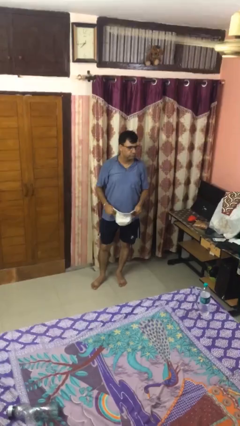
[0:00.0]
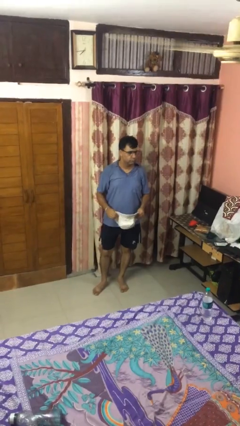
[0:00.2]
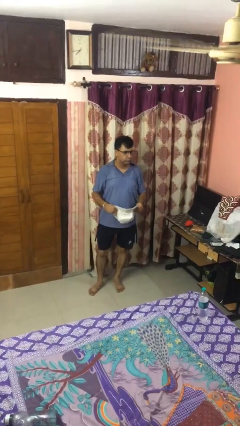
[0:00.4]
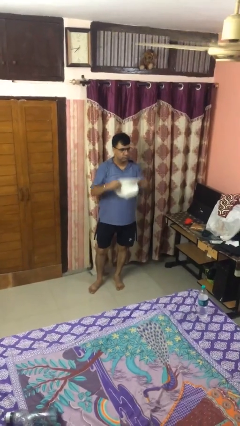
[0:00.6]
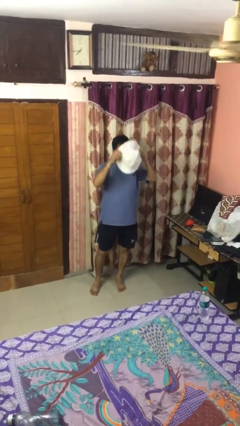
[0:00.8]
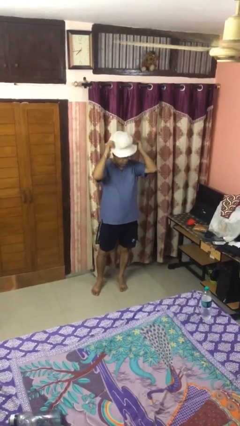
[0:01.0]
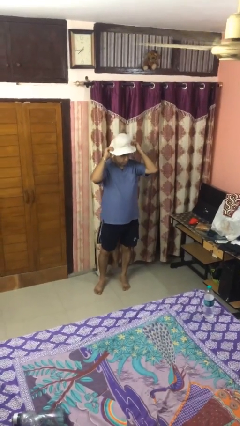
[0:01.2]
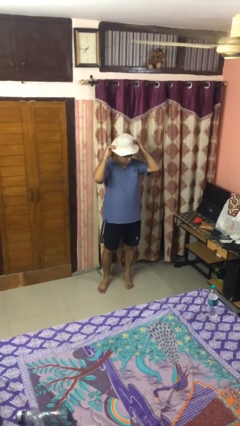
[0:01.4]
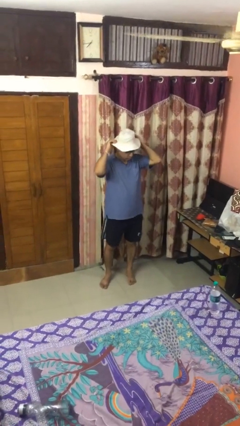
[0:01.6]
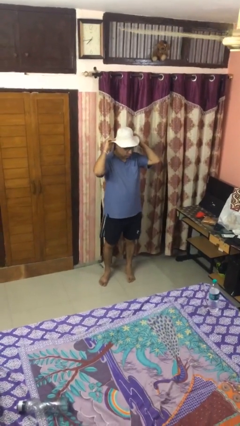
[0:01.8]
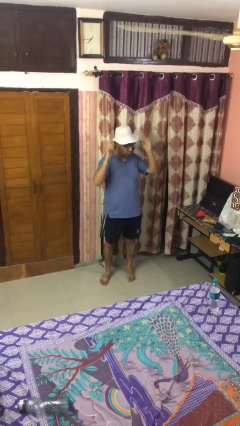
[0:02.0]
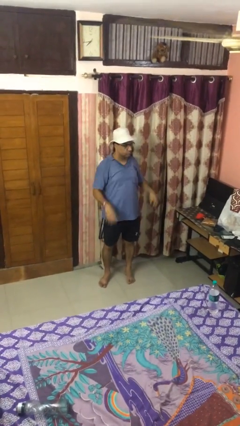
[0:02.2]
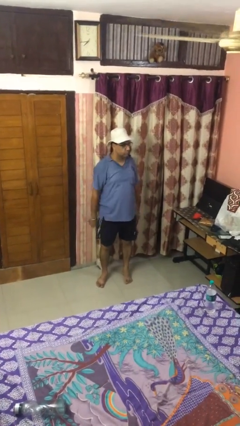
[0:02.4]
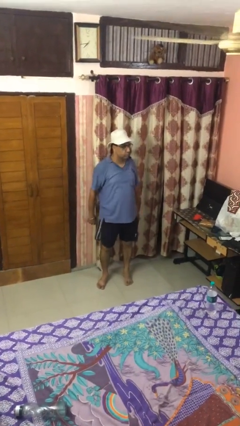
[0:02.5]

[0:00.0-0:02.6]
person puts on hat

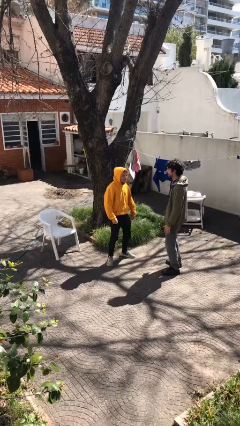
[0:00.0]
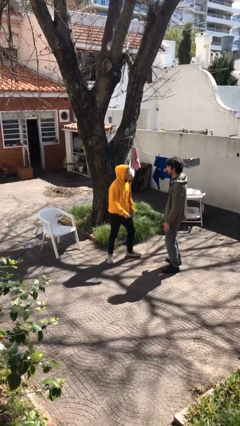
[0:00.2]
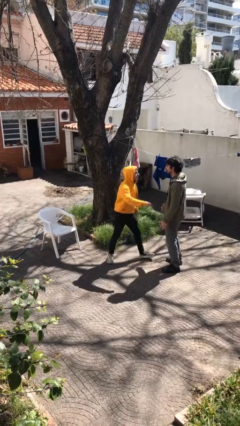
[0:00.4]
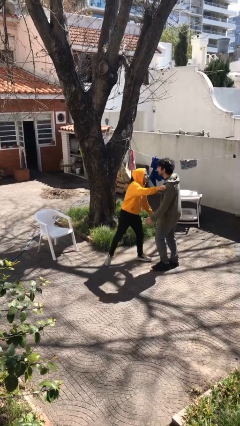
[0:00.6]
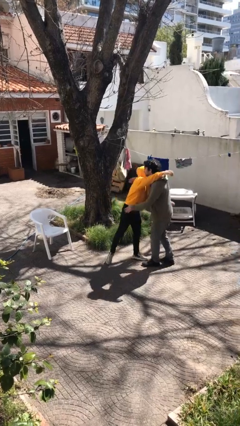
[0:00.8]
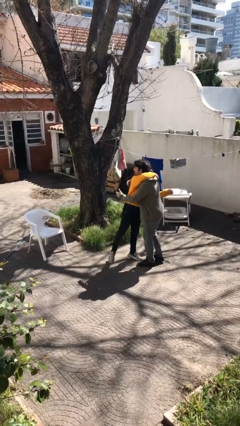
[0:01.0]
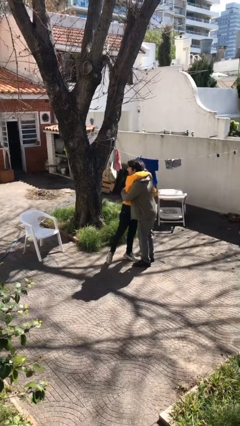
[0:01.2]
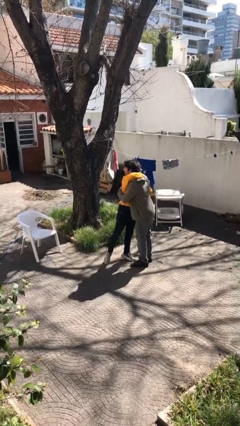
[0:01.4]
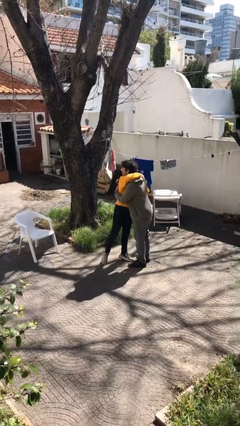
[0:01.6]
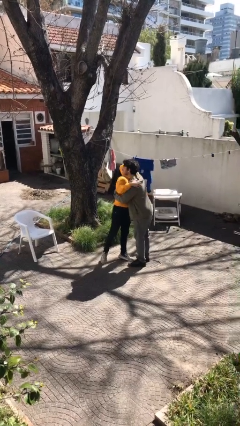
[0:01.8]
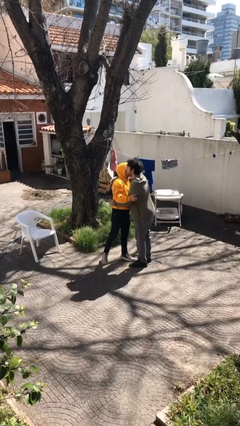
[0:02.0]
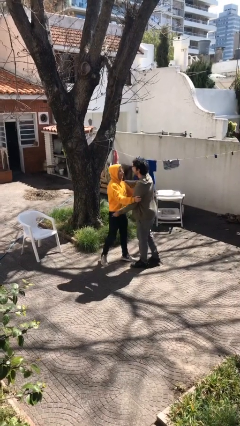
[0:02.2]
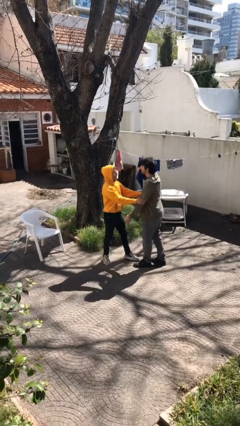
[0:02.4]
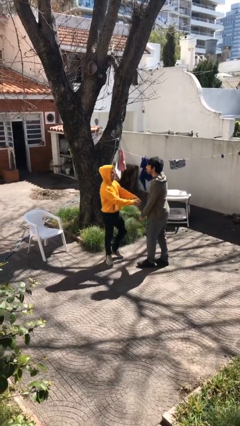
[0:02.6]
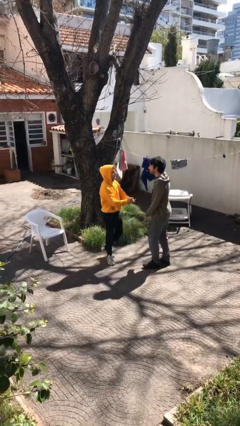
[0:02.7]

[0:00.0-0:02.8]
person embraces person

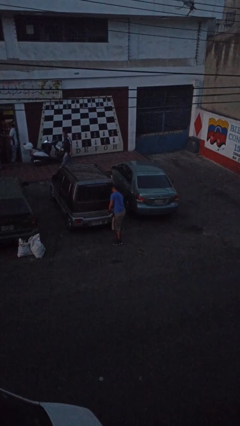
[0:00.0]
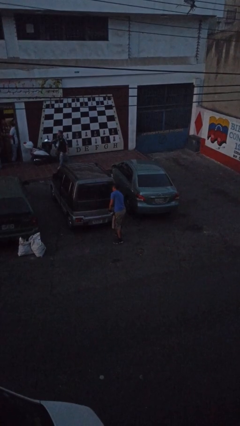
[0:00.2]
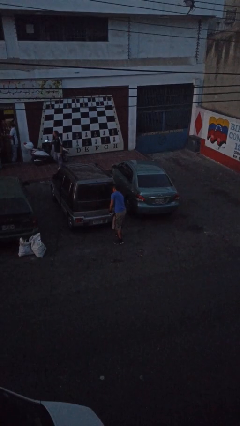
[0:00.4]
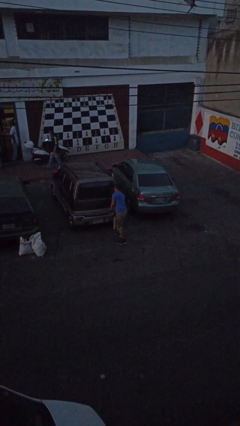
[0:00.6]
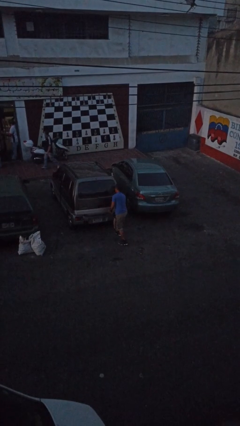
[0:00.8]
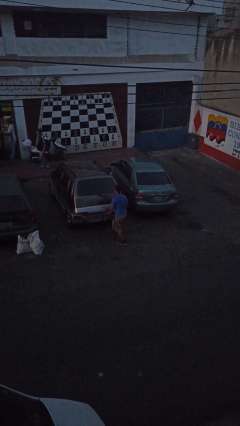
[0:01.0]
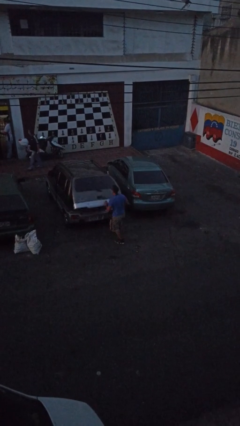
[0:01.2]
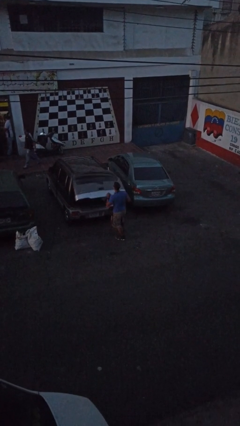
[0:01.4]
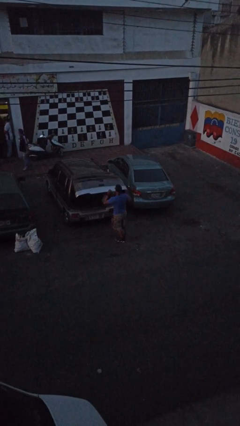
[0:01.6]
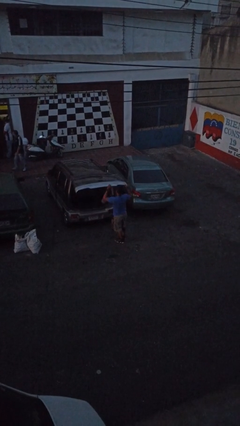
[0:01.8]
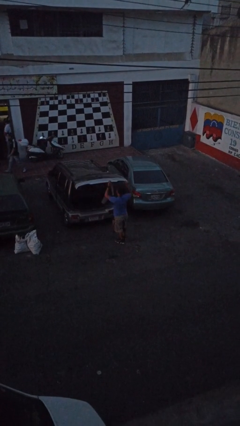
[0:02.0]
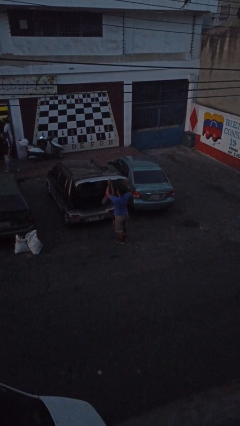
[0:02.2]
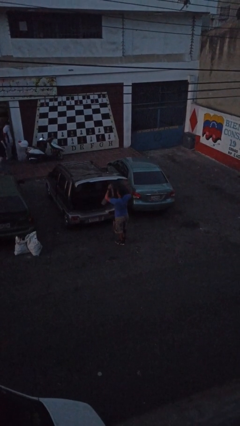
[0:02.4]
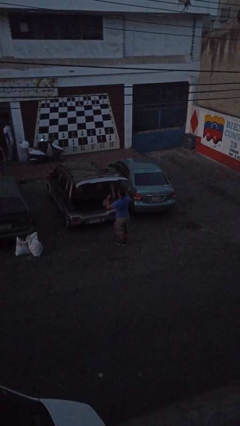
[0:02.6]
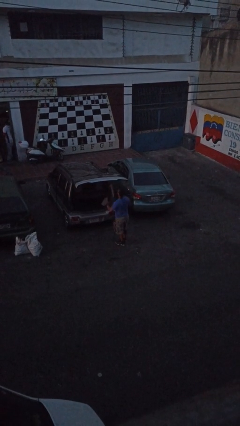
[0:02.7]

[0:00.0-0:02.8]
person opens car trunk

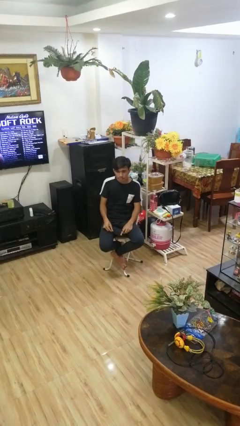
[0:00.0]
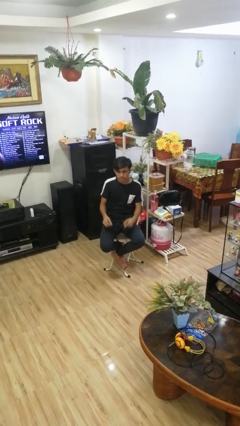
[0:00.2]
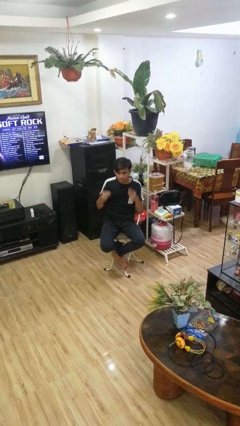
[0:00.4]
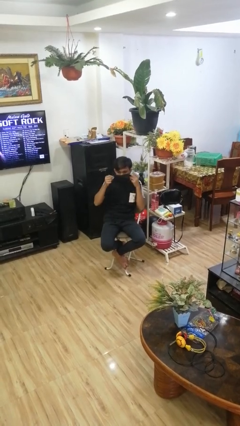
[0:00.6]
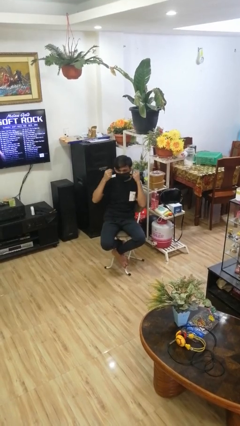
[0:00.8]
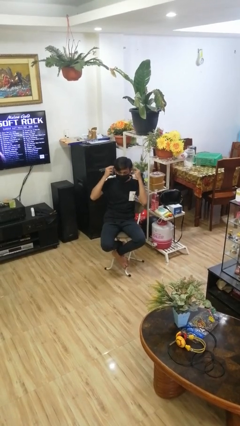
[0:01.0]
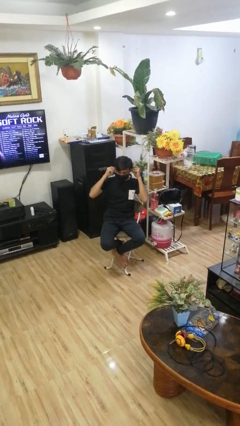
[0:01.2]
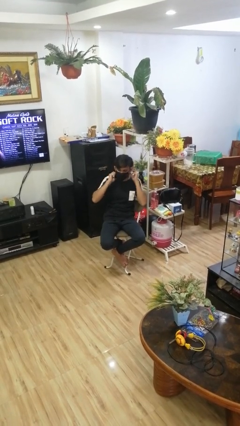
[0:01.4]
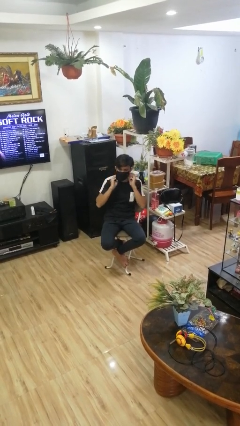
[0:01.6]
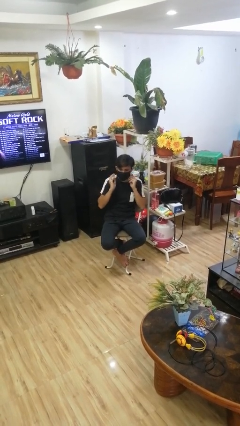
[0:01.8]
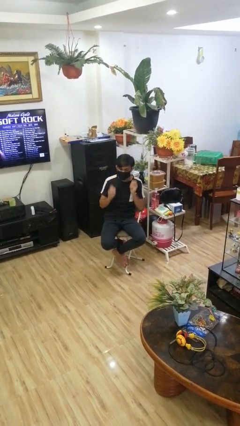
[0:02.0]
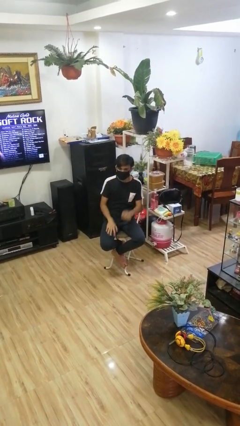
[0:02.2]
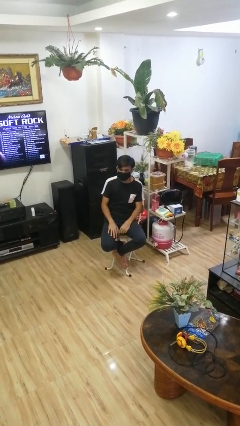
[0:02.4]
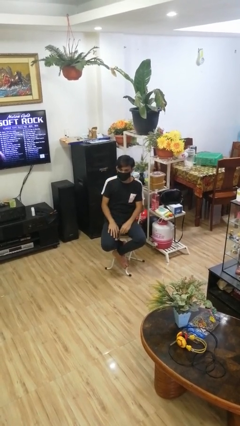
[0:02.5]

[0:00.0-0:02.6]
person puts on facemask

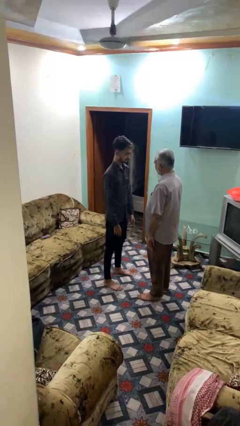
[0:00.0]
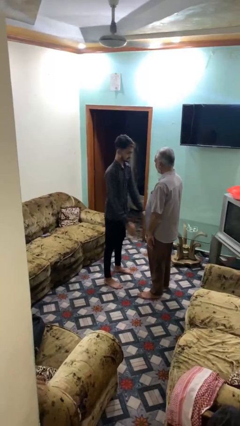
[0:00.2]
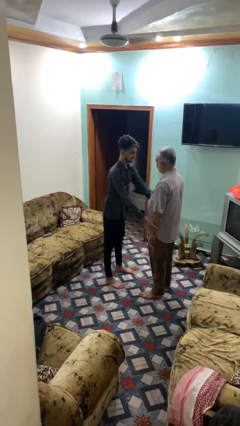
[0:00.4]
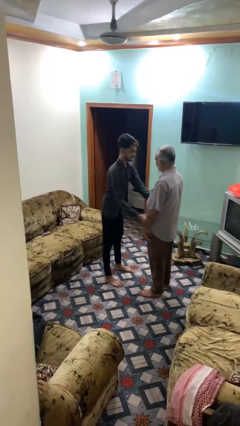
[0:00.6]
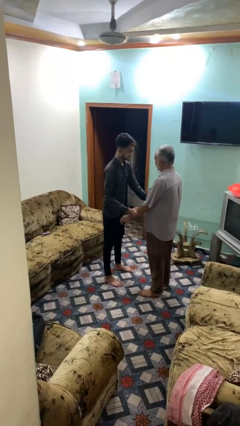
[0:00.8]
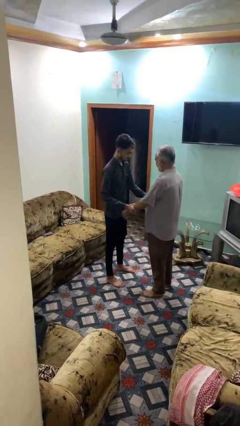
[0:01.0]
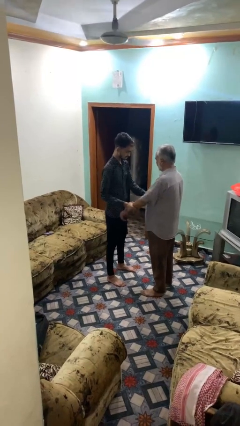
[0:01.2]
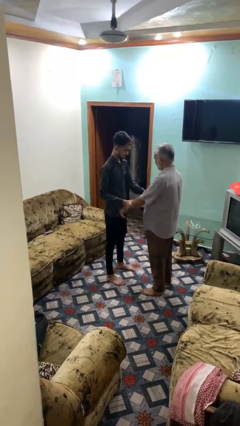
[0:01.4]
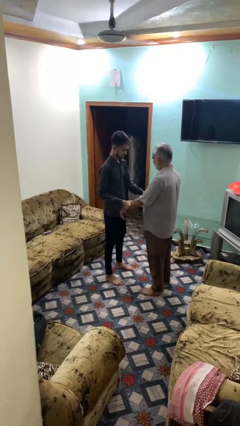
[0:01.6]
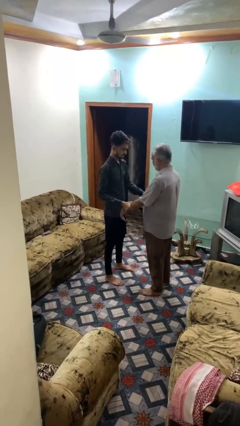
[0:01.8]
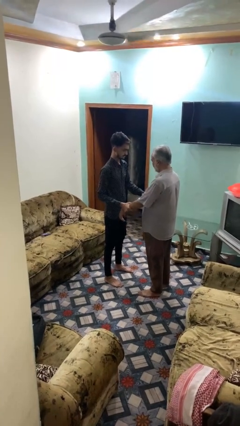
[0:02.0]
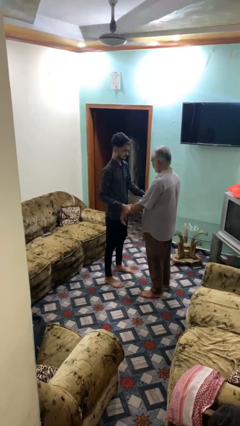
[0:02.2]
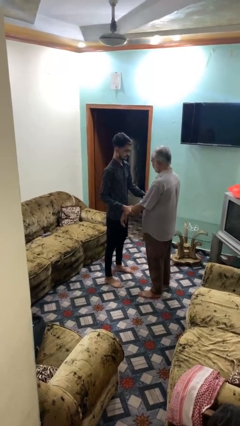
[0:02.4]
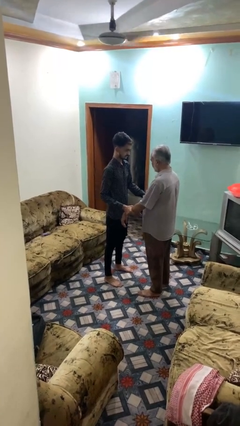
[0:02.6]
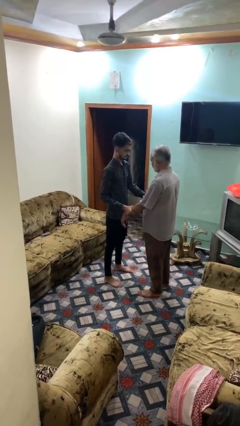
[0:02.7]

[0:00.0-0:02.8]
person grabs person by forearm

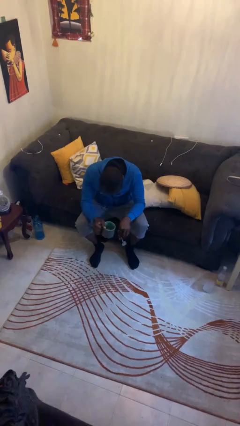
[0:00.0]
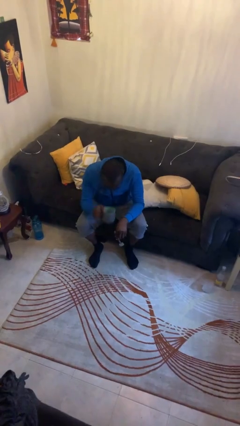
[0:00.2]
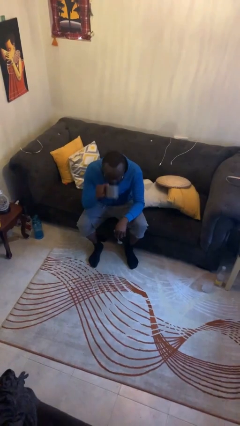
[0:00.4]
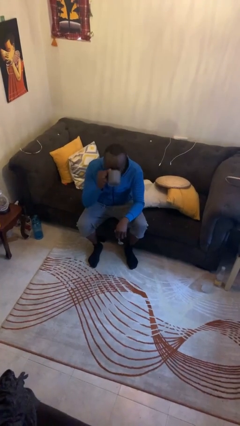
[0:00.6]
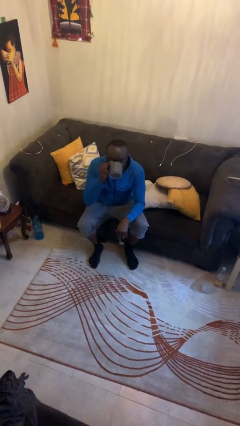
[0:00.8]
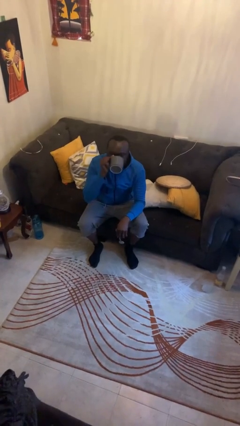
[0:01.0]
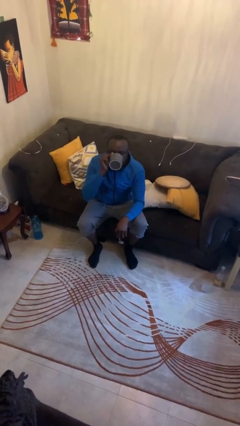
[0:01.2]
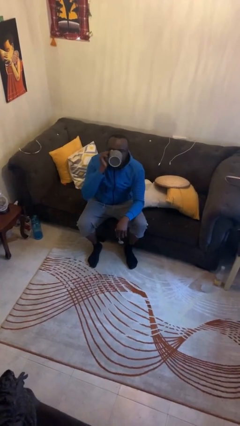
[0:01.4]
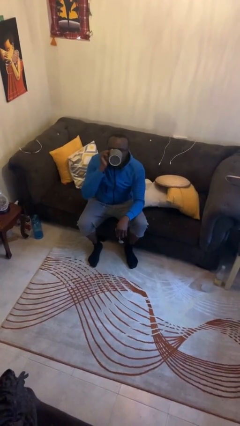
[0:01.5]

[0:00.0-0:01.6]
person drinks from mug

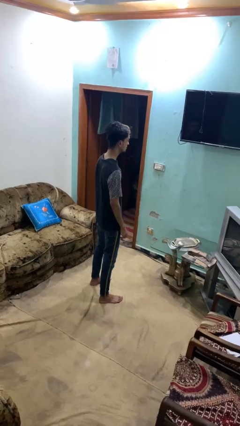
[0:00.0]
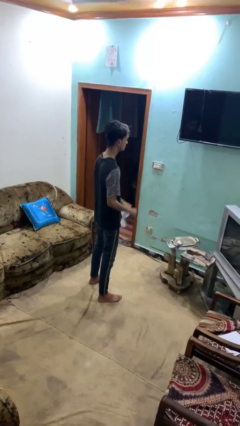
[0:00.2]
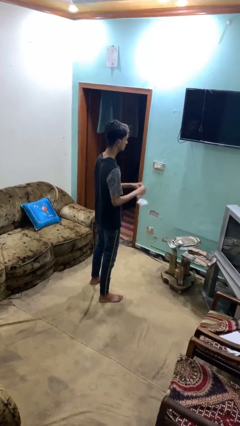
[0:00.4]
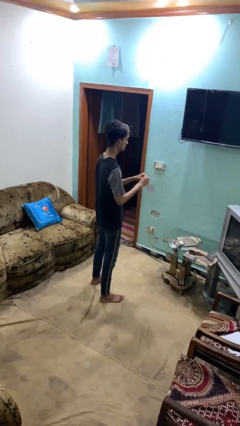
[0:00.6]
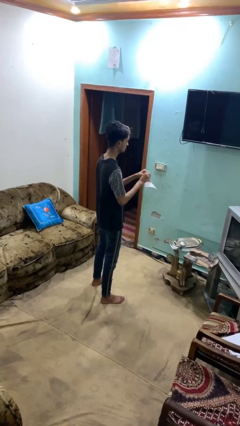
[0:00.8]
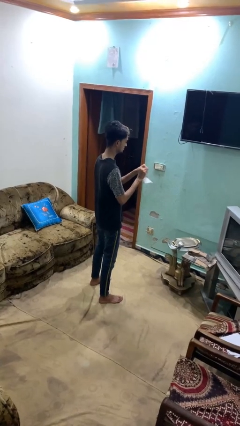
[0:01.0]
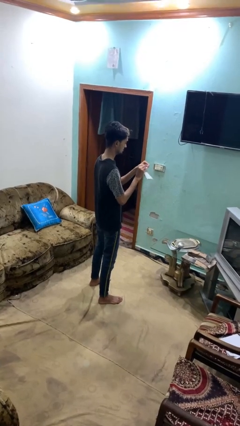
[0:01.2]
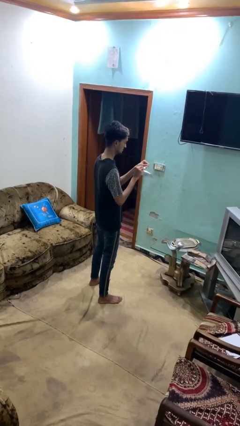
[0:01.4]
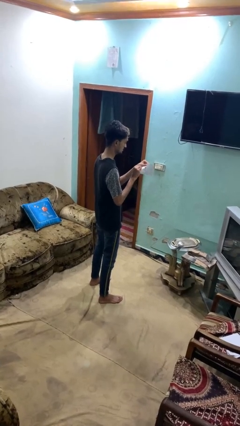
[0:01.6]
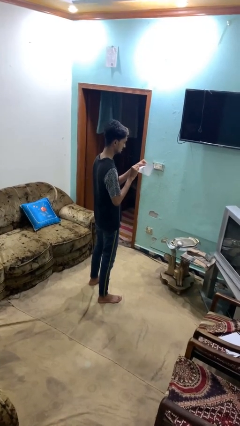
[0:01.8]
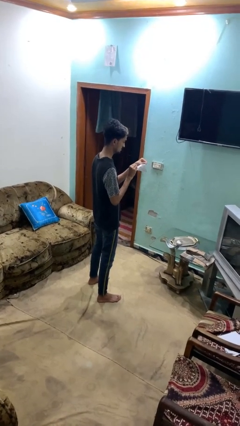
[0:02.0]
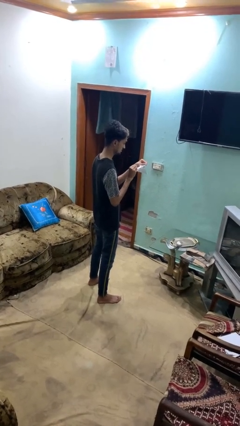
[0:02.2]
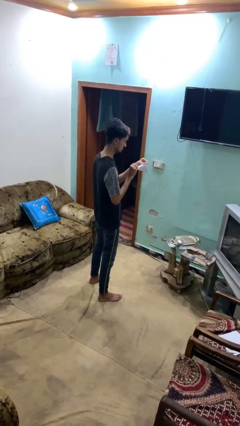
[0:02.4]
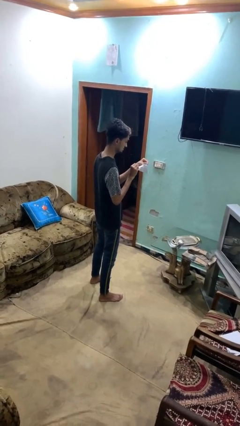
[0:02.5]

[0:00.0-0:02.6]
person tears paper
